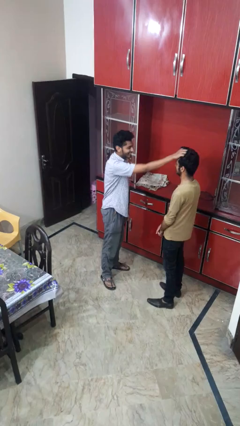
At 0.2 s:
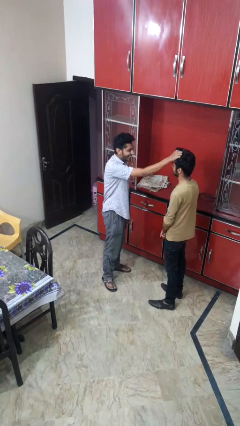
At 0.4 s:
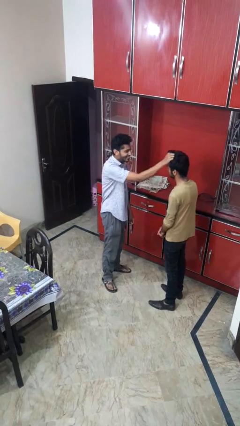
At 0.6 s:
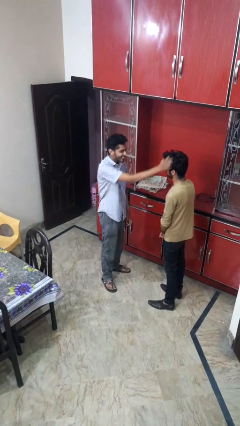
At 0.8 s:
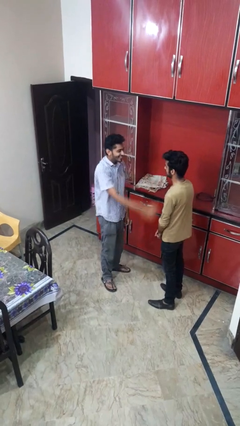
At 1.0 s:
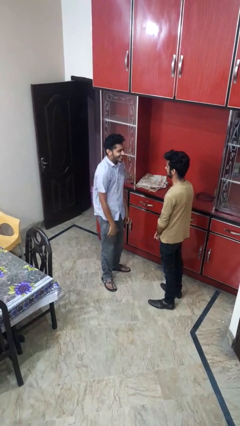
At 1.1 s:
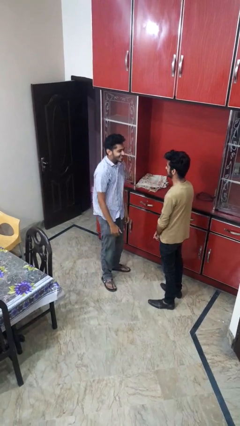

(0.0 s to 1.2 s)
person grabs person by hair

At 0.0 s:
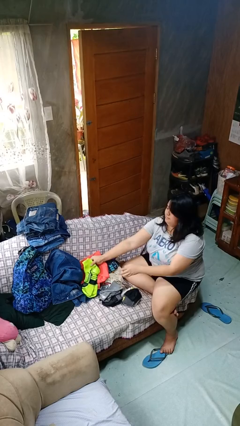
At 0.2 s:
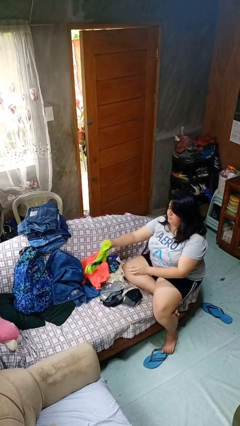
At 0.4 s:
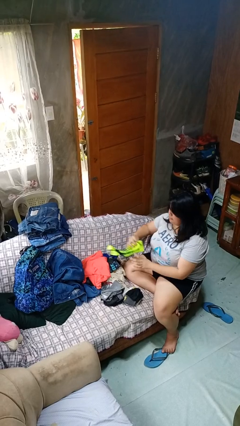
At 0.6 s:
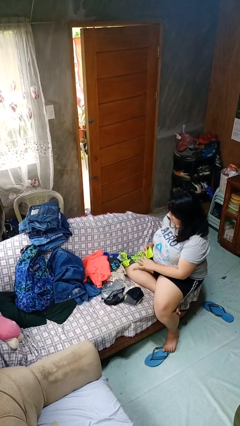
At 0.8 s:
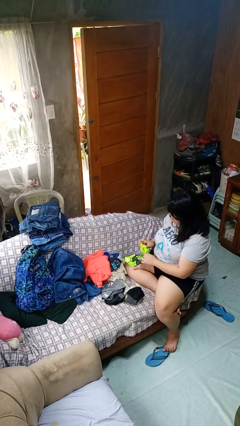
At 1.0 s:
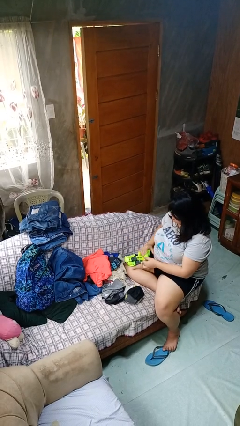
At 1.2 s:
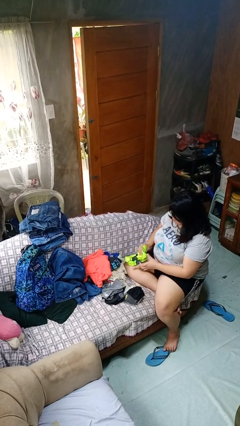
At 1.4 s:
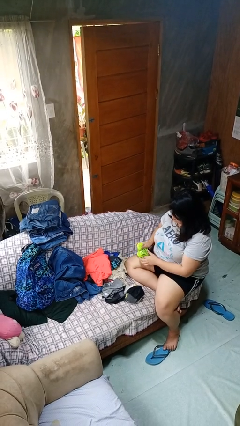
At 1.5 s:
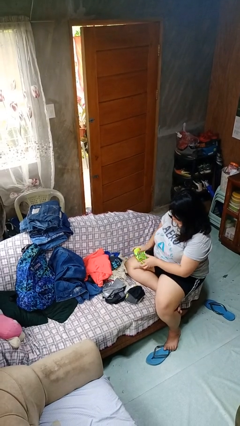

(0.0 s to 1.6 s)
person folds socks

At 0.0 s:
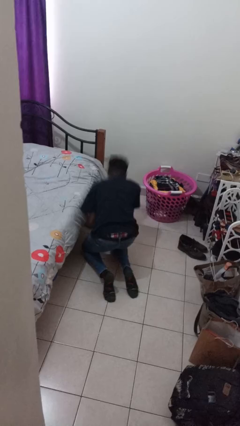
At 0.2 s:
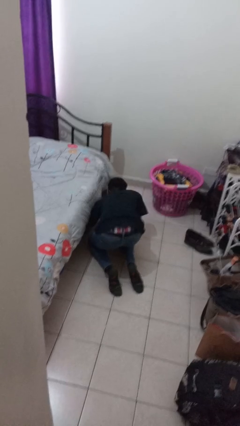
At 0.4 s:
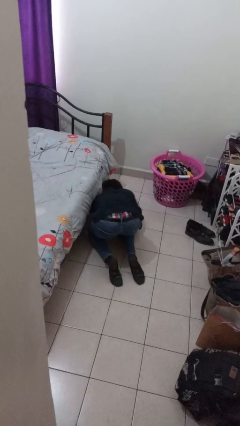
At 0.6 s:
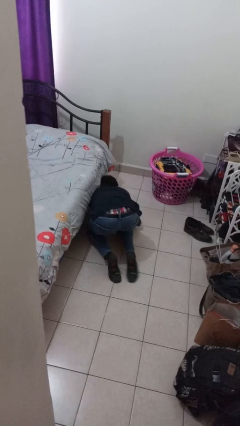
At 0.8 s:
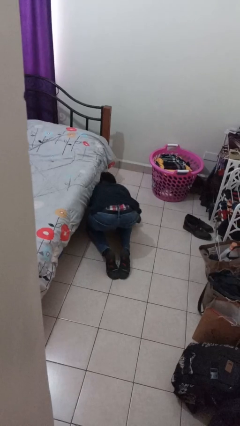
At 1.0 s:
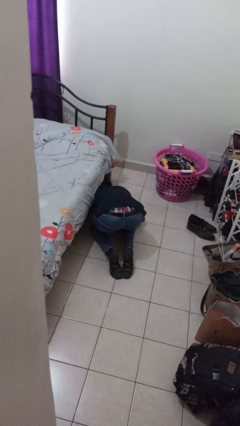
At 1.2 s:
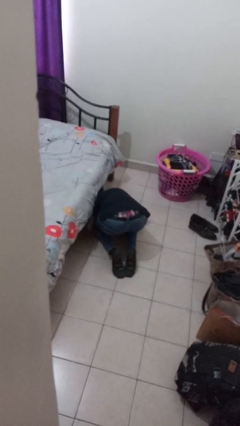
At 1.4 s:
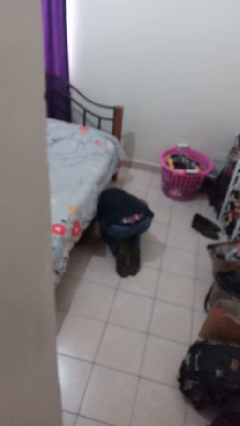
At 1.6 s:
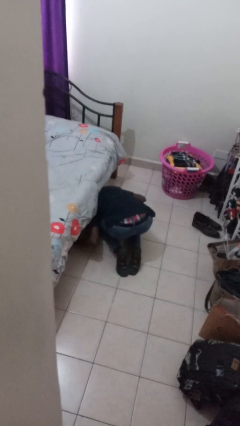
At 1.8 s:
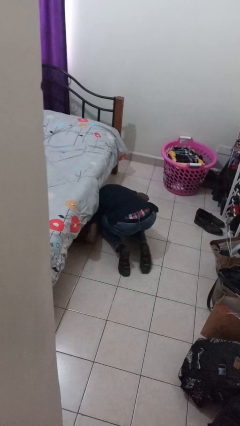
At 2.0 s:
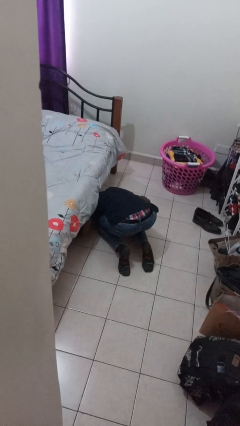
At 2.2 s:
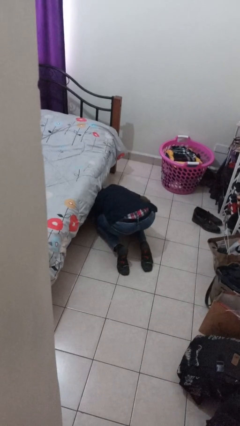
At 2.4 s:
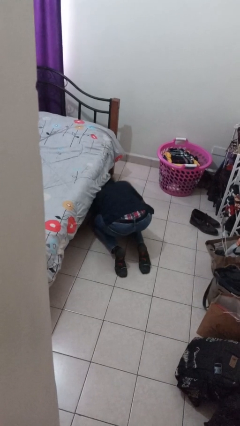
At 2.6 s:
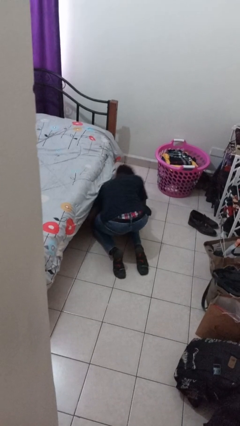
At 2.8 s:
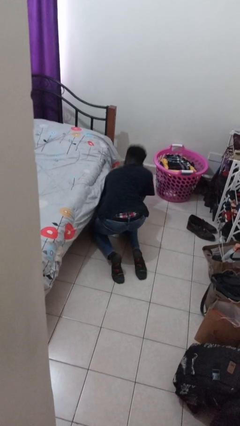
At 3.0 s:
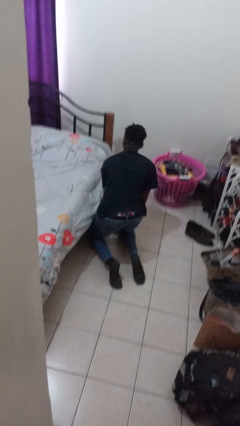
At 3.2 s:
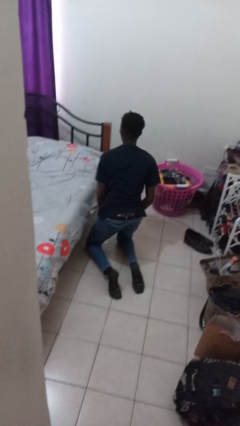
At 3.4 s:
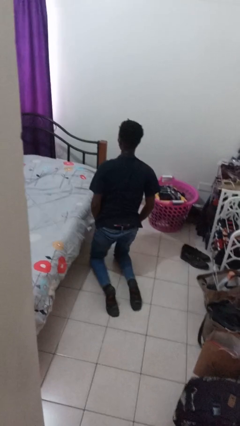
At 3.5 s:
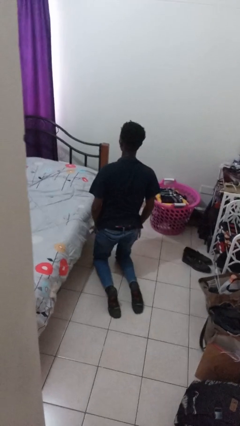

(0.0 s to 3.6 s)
person searches under bed

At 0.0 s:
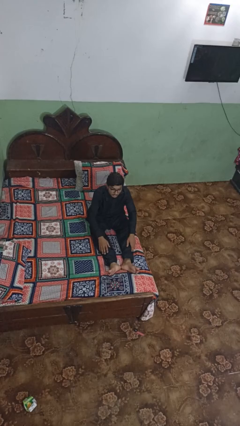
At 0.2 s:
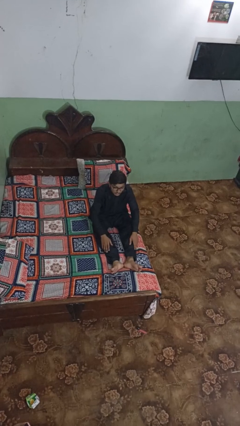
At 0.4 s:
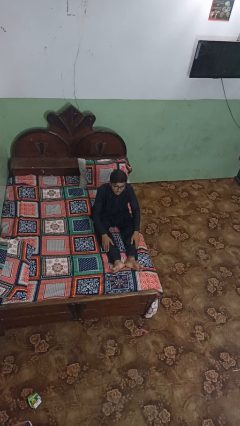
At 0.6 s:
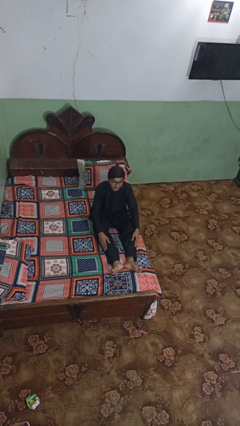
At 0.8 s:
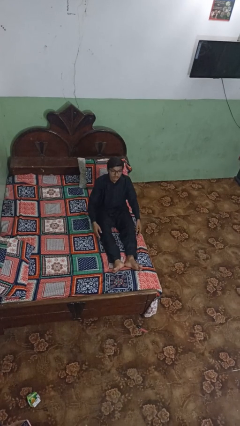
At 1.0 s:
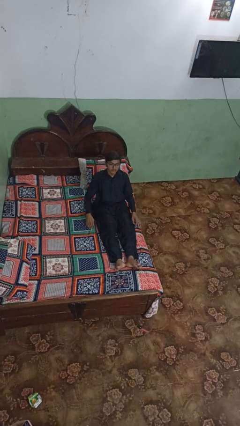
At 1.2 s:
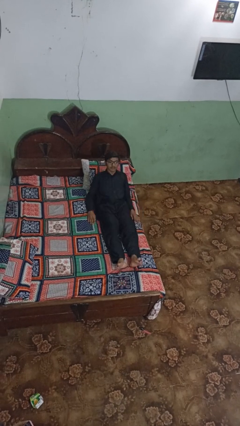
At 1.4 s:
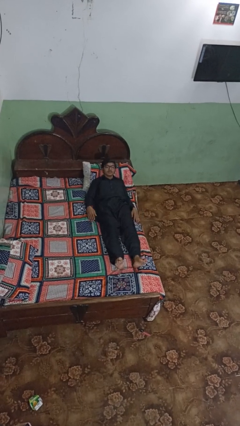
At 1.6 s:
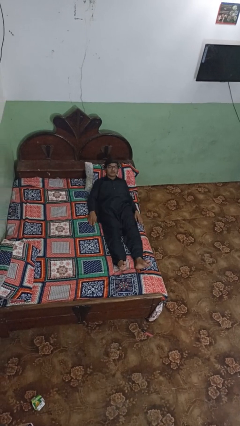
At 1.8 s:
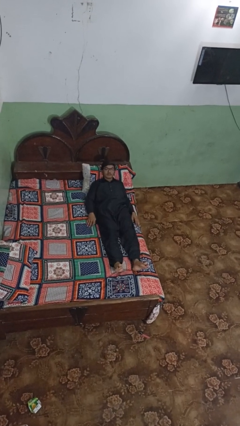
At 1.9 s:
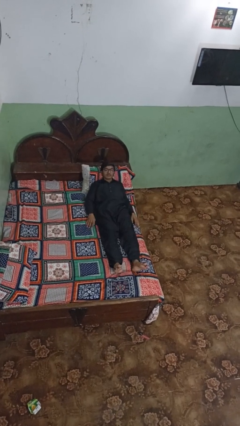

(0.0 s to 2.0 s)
person lies down on bed

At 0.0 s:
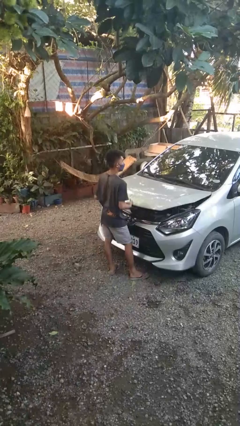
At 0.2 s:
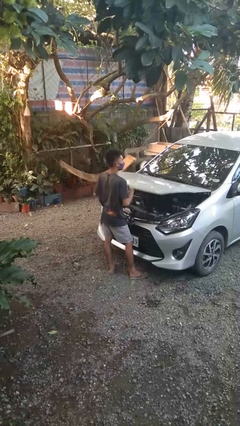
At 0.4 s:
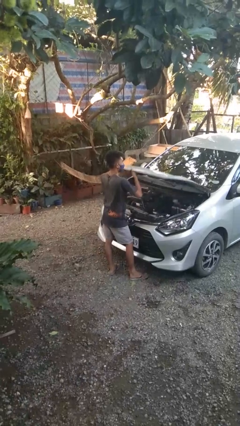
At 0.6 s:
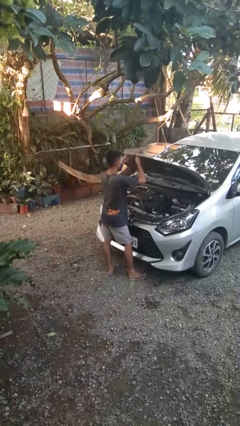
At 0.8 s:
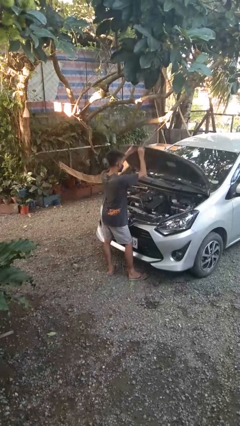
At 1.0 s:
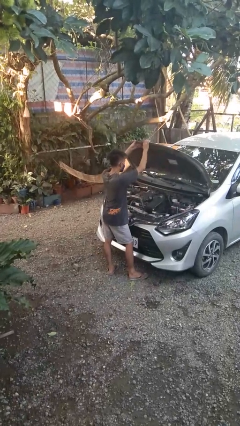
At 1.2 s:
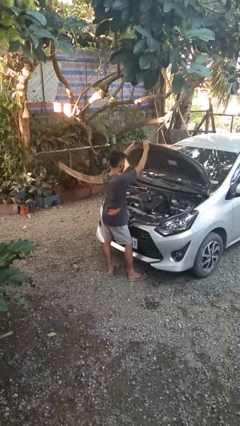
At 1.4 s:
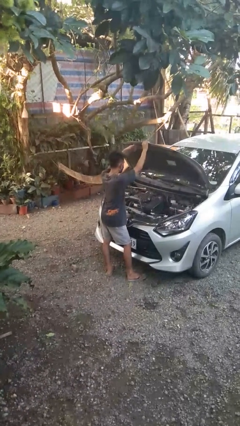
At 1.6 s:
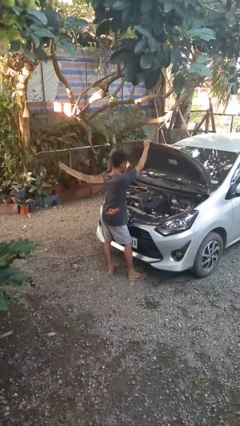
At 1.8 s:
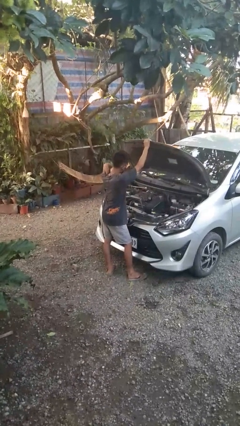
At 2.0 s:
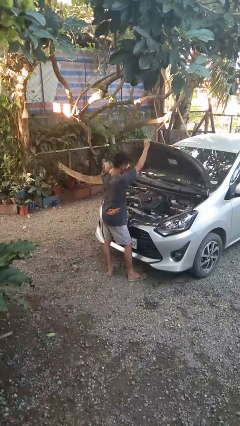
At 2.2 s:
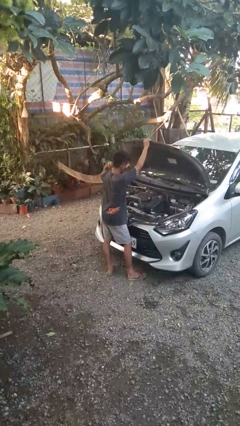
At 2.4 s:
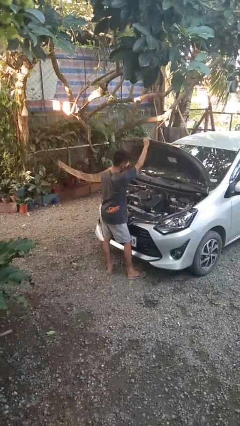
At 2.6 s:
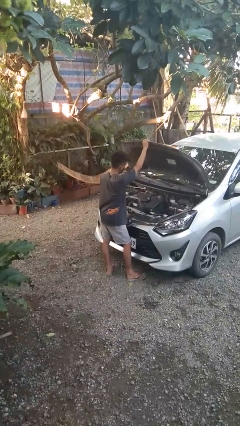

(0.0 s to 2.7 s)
person opens car hood

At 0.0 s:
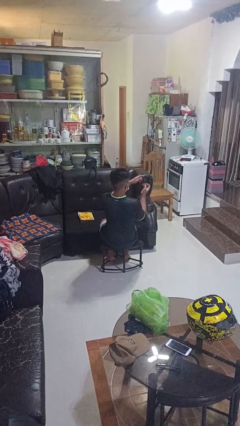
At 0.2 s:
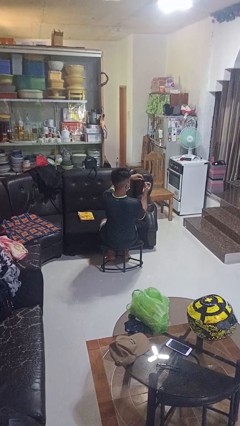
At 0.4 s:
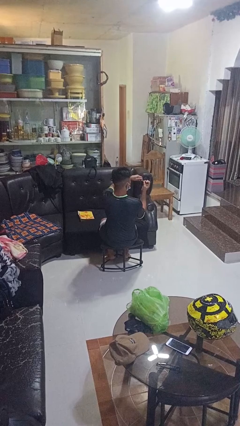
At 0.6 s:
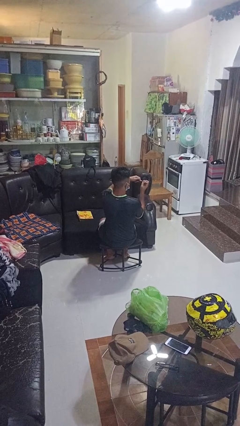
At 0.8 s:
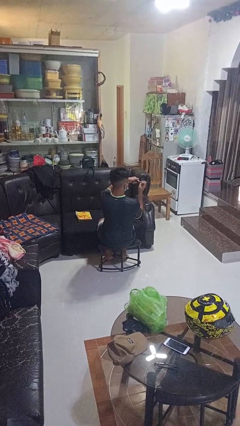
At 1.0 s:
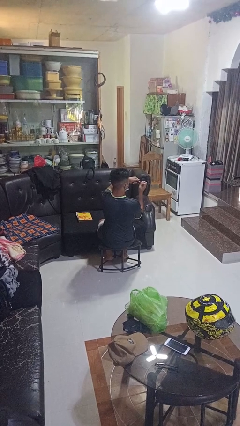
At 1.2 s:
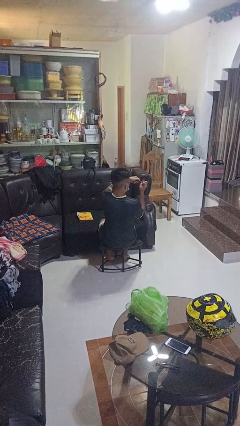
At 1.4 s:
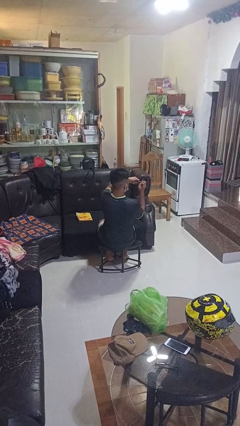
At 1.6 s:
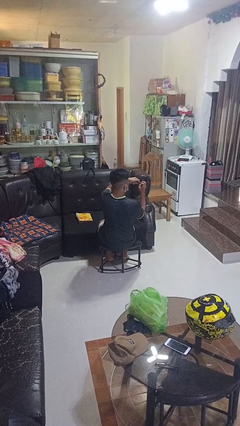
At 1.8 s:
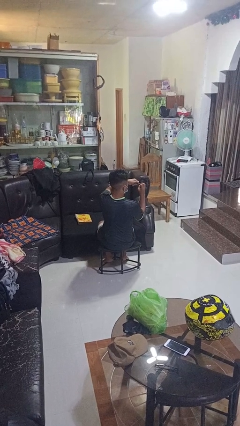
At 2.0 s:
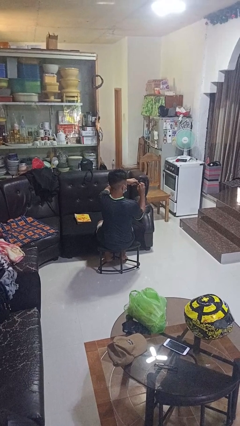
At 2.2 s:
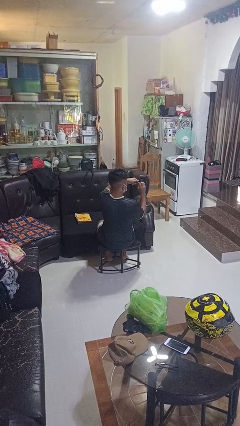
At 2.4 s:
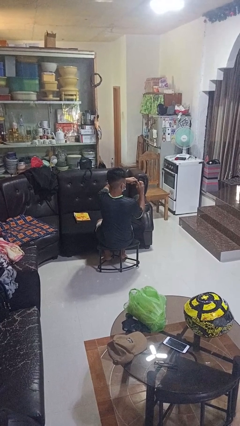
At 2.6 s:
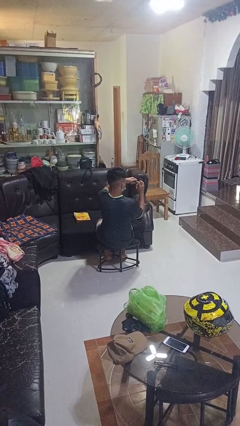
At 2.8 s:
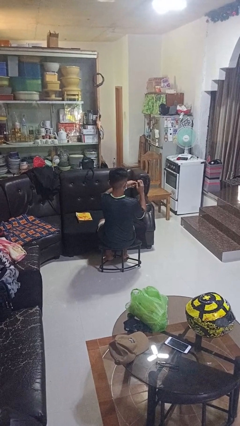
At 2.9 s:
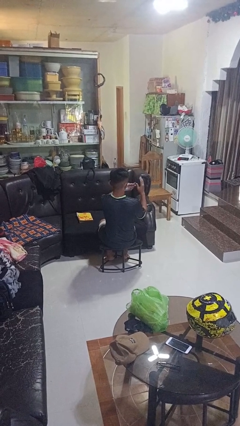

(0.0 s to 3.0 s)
person clips fingernails

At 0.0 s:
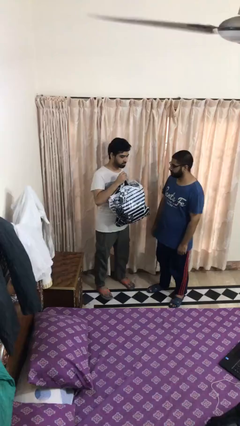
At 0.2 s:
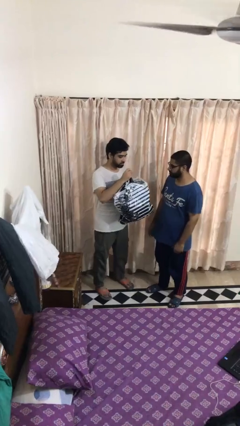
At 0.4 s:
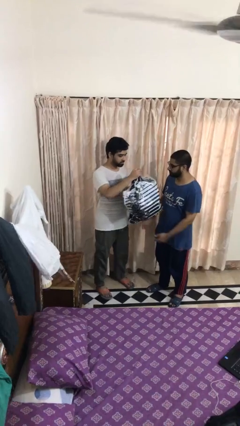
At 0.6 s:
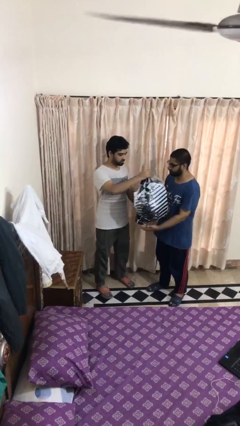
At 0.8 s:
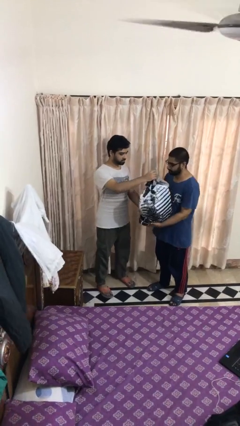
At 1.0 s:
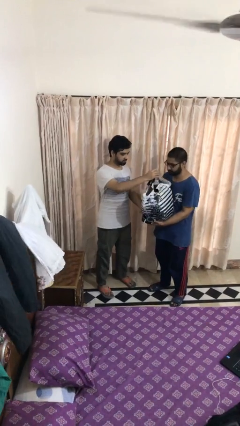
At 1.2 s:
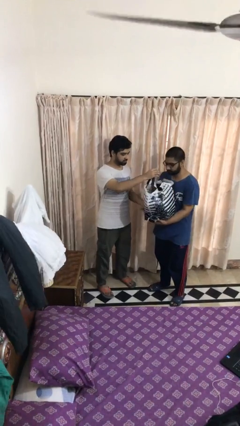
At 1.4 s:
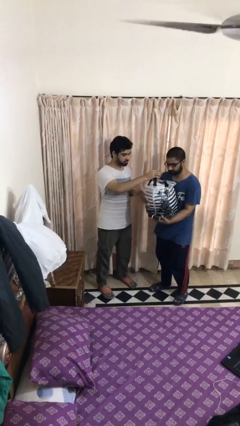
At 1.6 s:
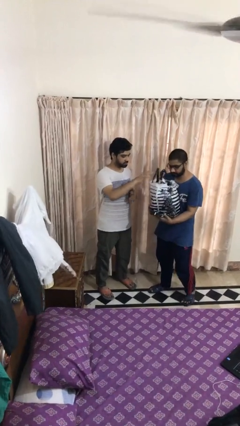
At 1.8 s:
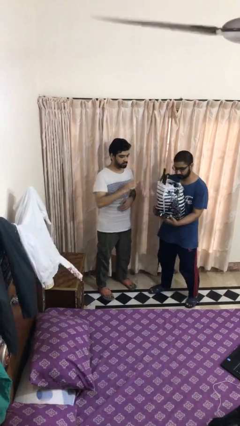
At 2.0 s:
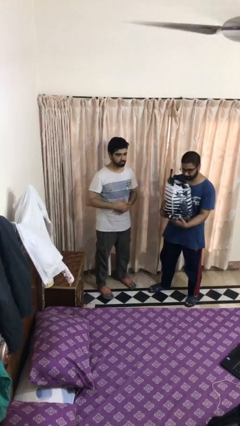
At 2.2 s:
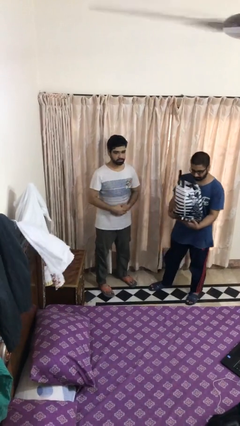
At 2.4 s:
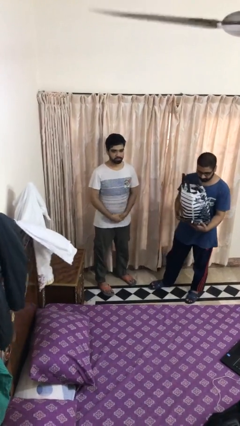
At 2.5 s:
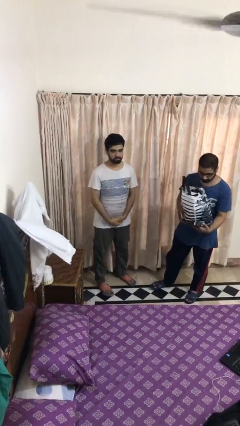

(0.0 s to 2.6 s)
person transfers object to person

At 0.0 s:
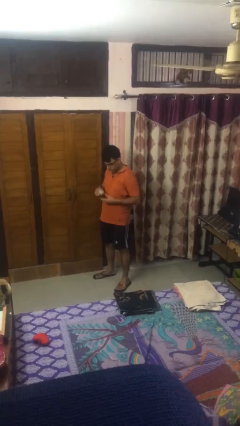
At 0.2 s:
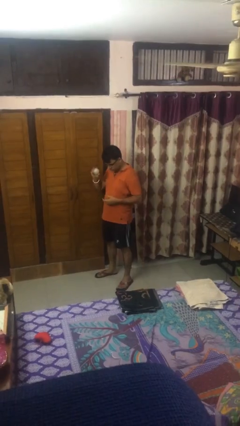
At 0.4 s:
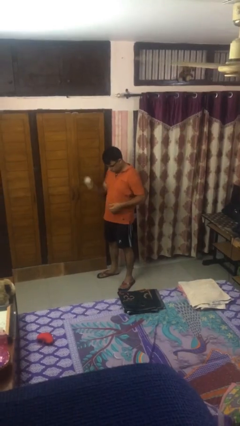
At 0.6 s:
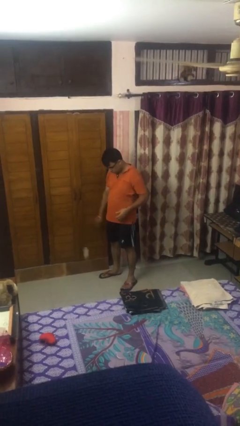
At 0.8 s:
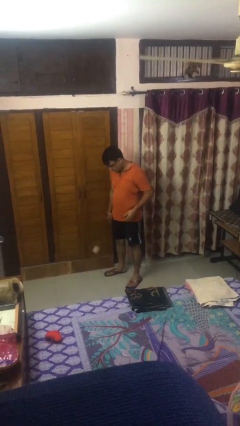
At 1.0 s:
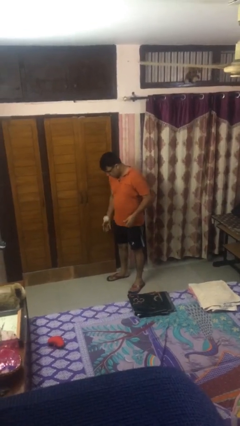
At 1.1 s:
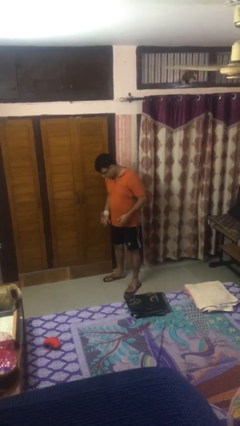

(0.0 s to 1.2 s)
person bounces ball on floor
